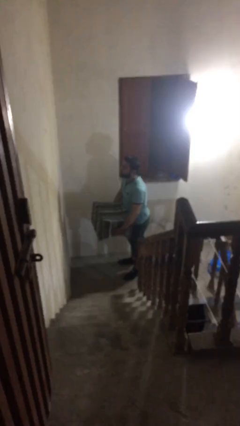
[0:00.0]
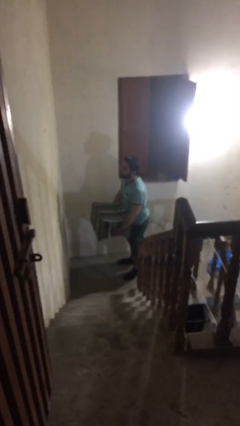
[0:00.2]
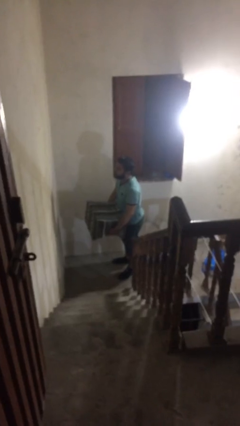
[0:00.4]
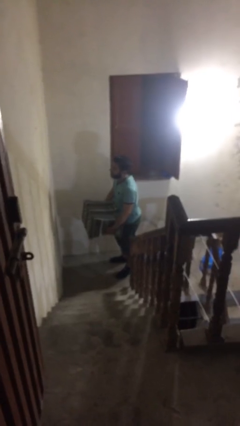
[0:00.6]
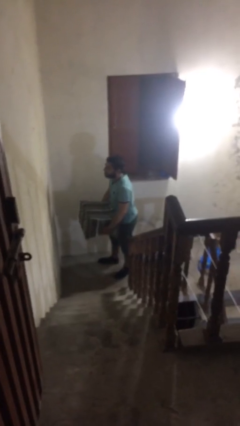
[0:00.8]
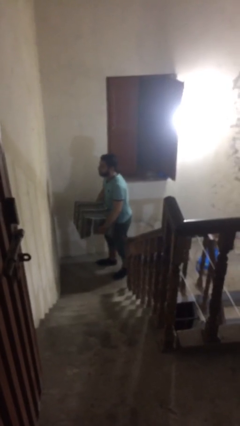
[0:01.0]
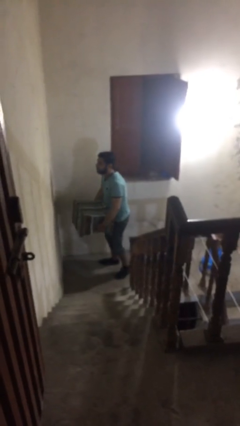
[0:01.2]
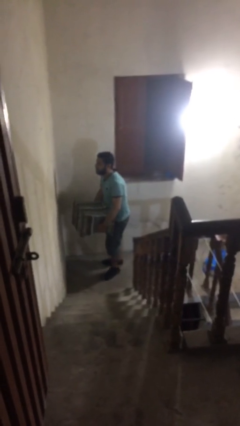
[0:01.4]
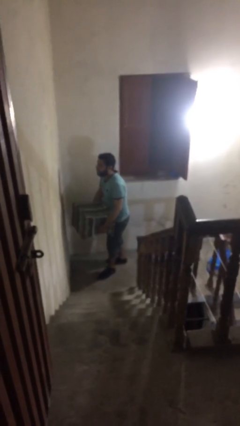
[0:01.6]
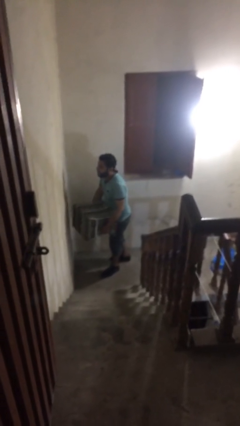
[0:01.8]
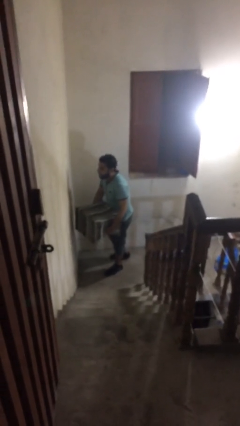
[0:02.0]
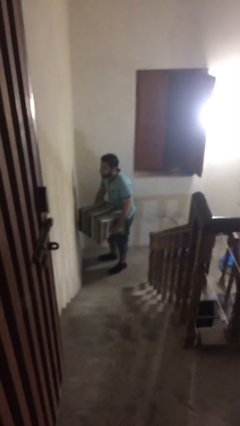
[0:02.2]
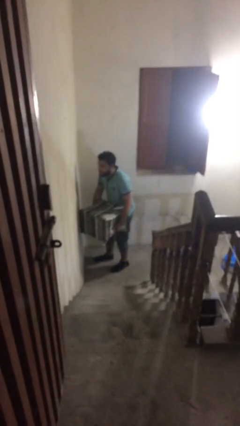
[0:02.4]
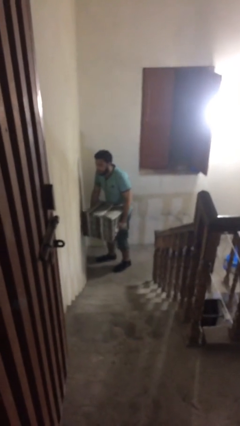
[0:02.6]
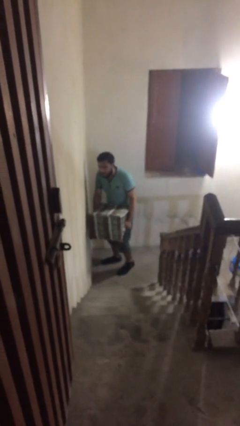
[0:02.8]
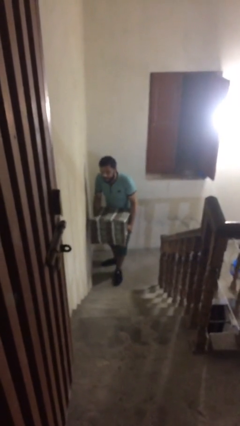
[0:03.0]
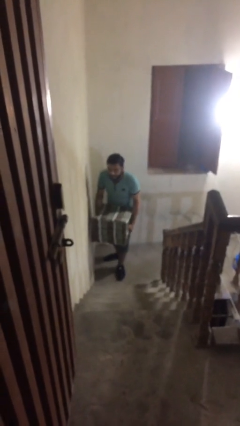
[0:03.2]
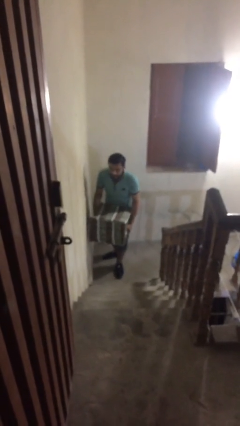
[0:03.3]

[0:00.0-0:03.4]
person carries heavy object

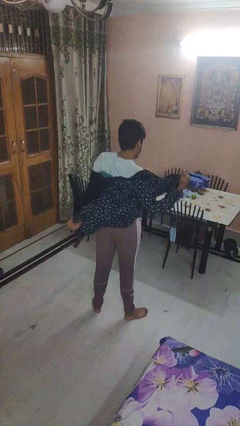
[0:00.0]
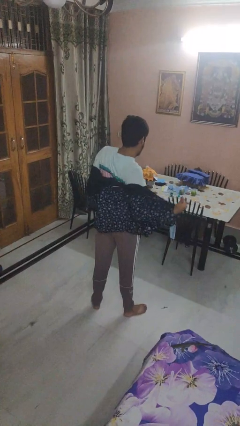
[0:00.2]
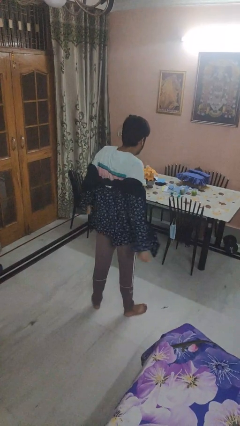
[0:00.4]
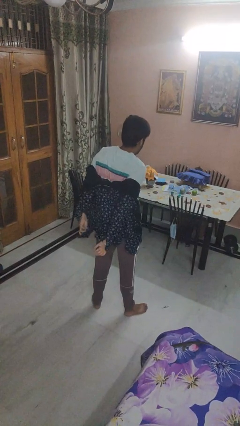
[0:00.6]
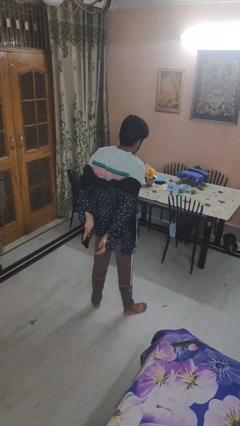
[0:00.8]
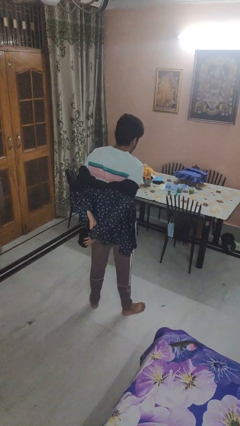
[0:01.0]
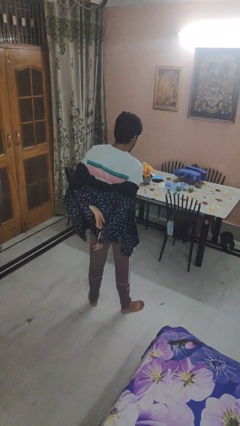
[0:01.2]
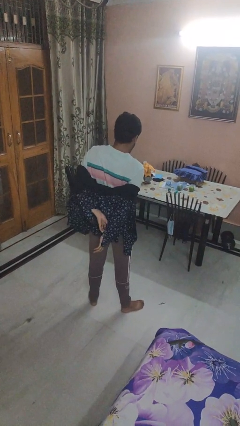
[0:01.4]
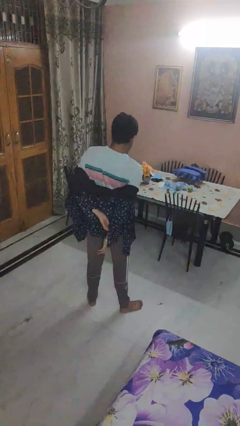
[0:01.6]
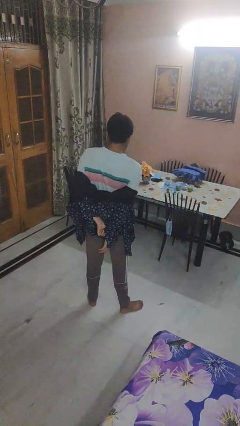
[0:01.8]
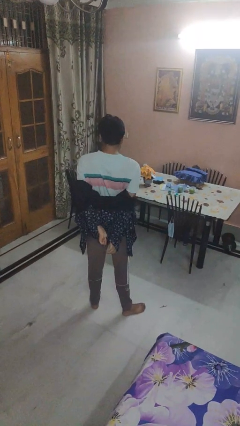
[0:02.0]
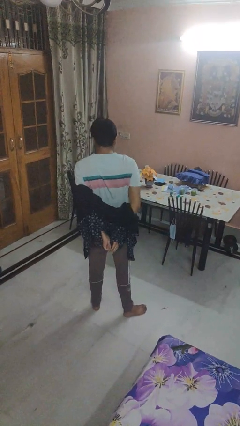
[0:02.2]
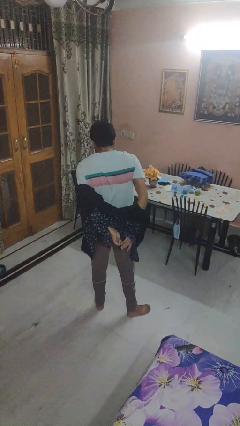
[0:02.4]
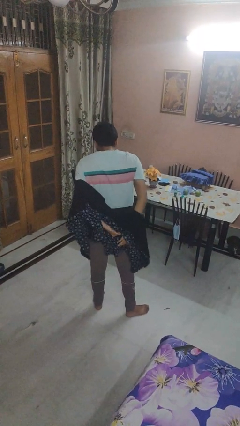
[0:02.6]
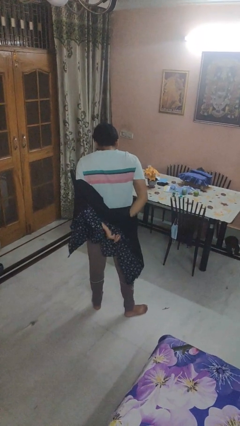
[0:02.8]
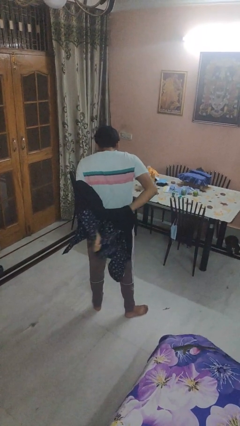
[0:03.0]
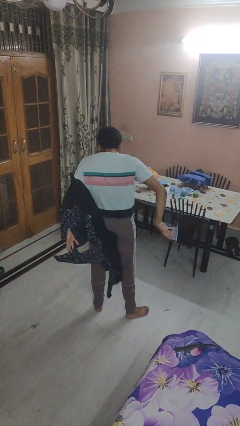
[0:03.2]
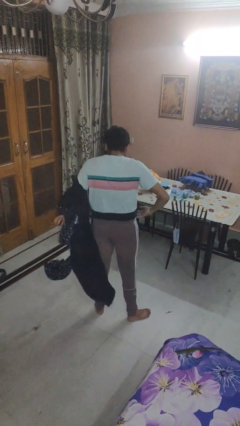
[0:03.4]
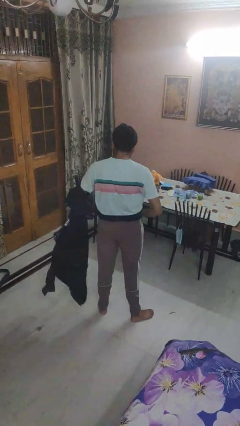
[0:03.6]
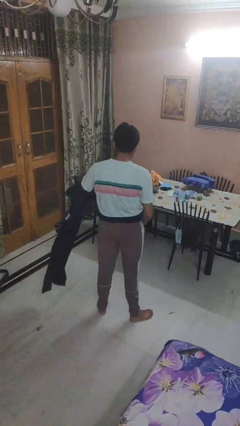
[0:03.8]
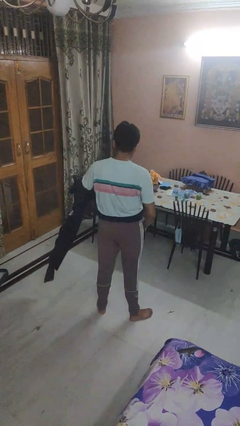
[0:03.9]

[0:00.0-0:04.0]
person takes off shirt

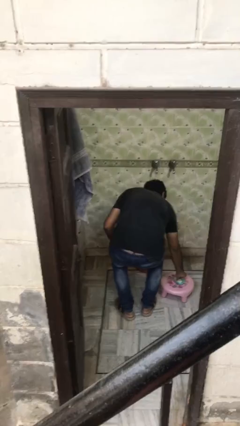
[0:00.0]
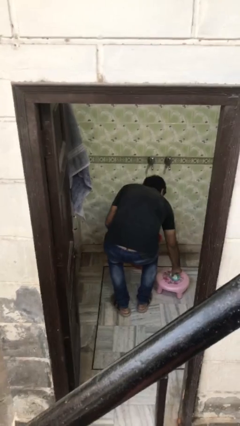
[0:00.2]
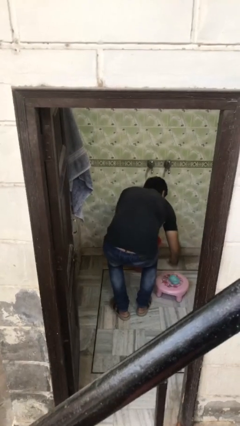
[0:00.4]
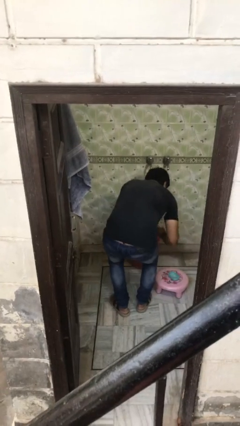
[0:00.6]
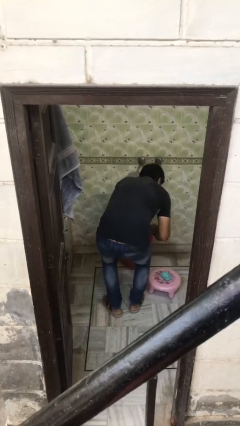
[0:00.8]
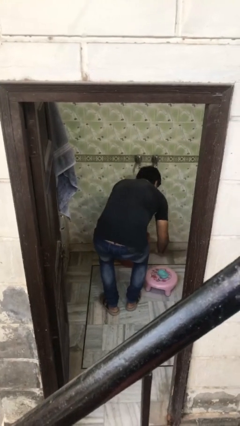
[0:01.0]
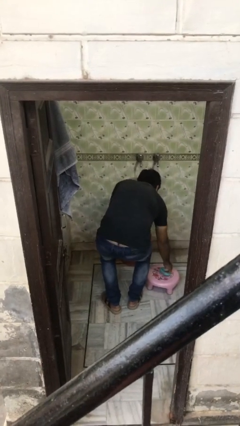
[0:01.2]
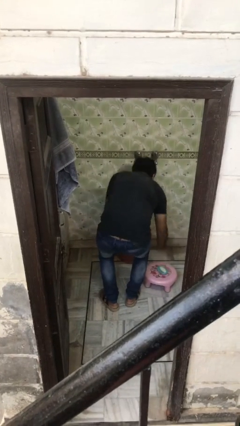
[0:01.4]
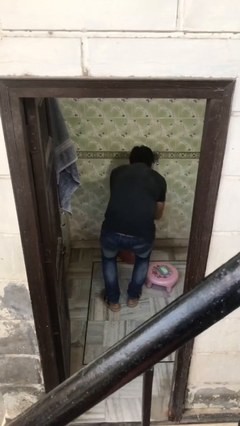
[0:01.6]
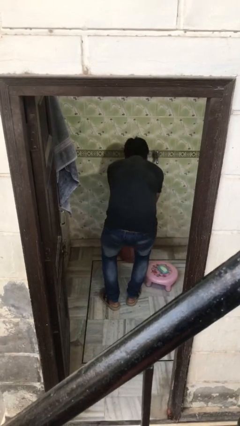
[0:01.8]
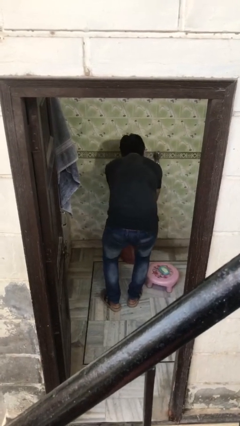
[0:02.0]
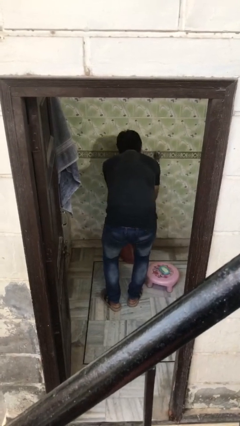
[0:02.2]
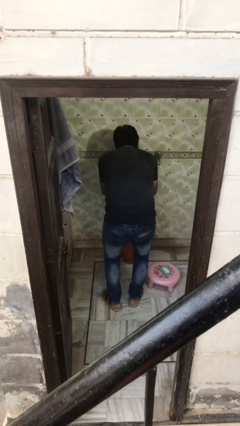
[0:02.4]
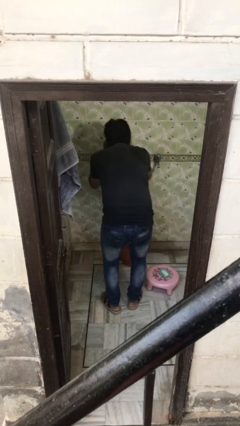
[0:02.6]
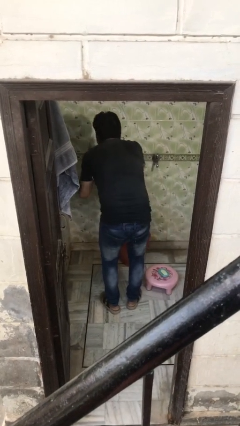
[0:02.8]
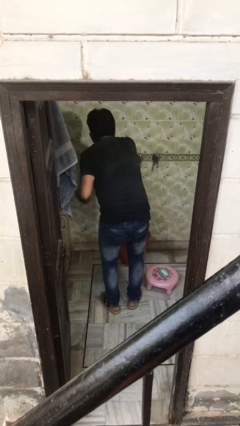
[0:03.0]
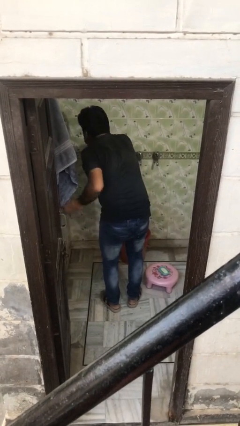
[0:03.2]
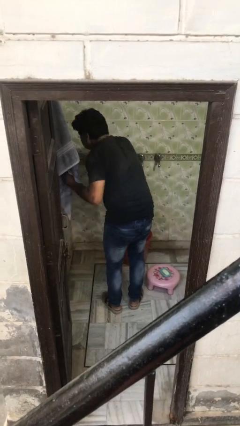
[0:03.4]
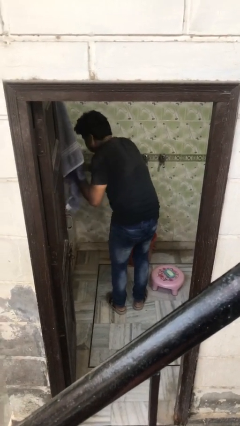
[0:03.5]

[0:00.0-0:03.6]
person washes face

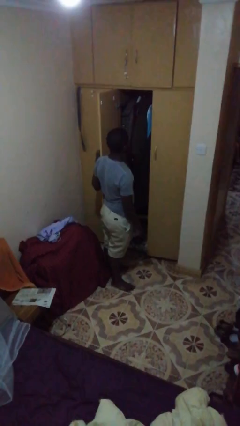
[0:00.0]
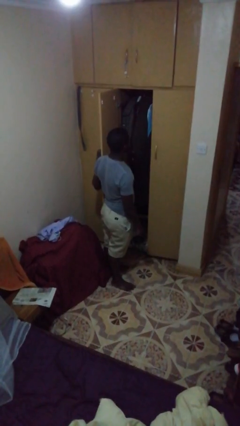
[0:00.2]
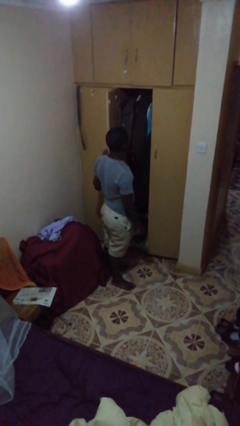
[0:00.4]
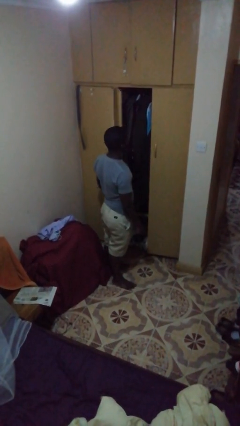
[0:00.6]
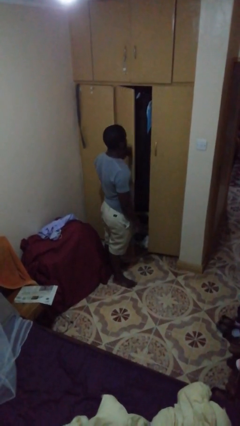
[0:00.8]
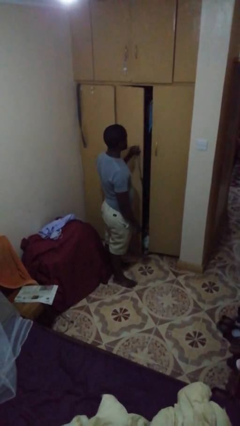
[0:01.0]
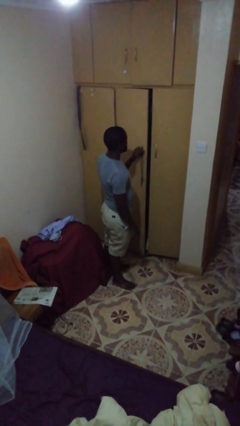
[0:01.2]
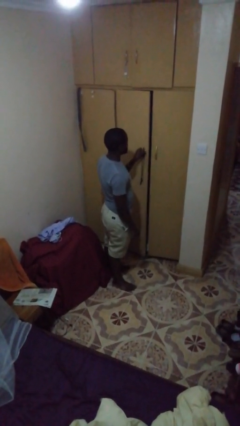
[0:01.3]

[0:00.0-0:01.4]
person closes closet door

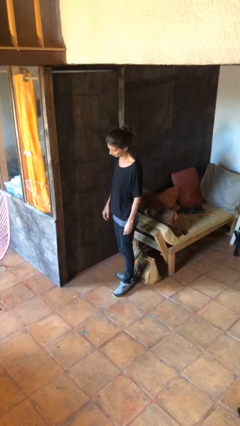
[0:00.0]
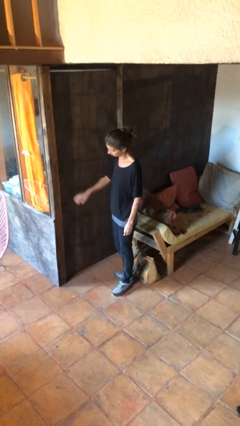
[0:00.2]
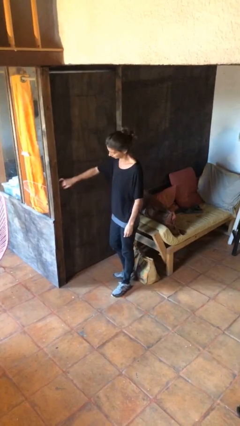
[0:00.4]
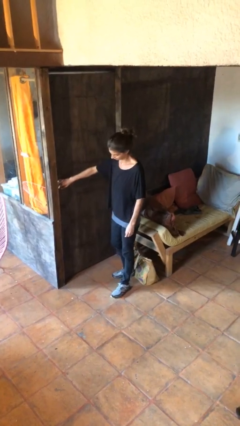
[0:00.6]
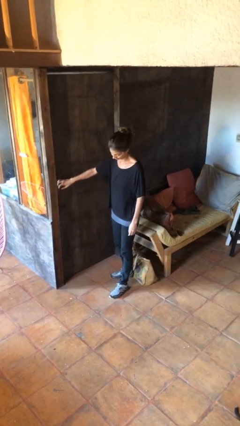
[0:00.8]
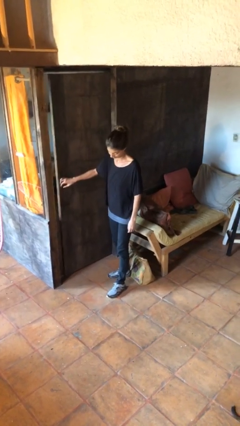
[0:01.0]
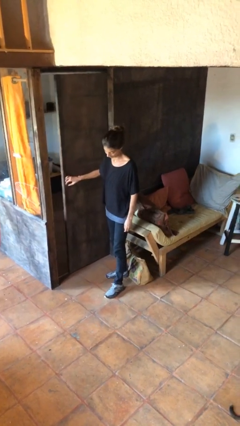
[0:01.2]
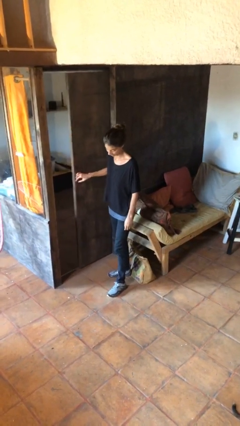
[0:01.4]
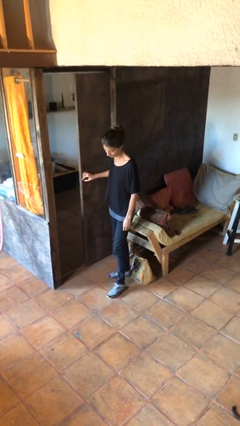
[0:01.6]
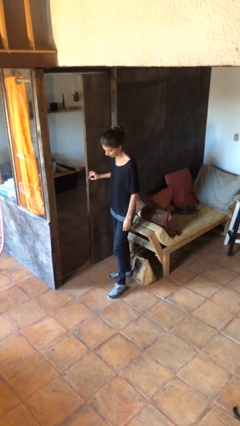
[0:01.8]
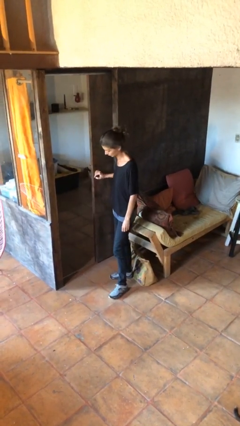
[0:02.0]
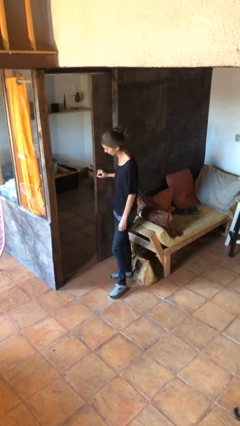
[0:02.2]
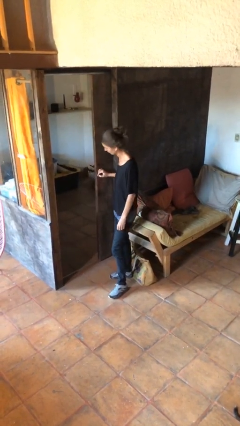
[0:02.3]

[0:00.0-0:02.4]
person opens sliding door

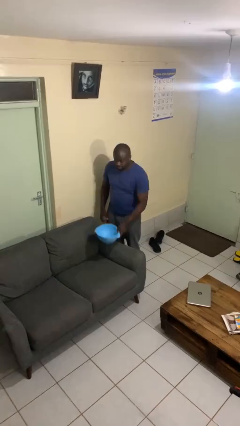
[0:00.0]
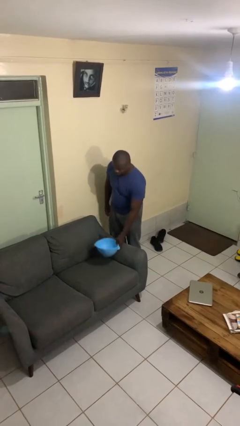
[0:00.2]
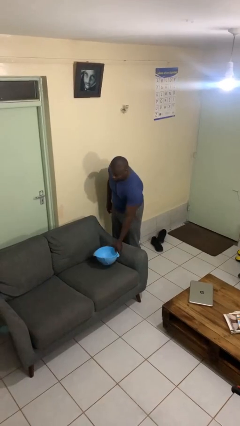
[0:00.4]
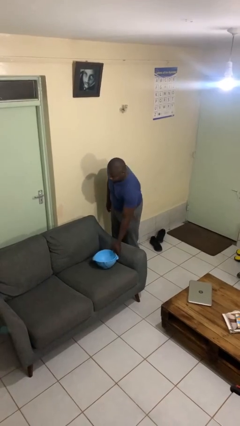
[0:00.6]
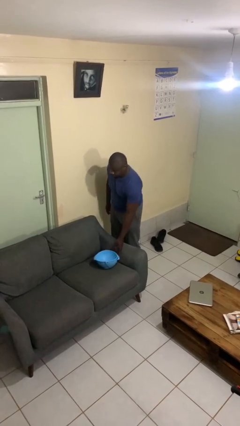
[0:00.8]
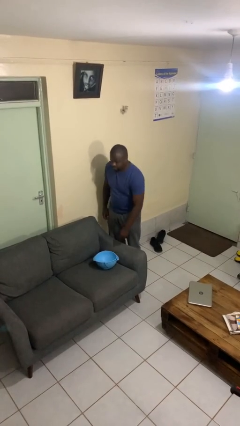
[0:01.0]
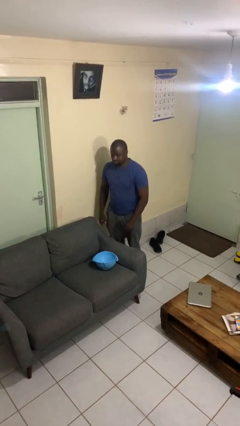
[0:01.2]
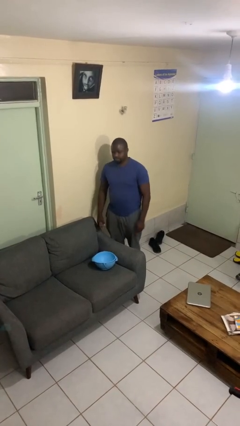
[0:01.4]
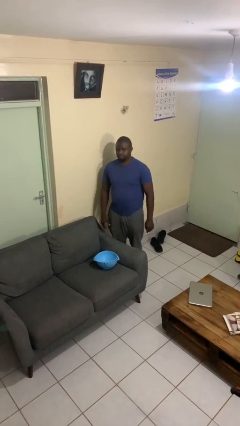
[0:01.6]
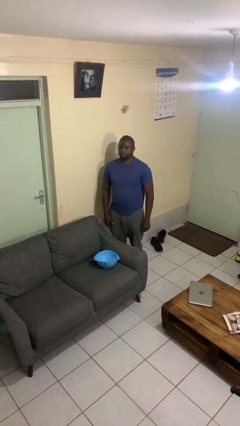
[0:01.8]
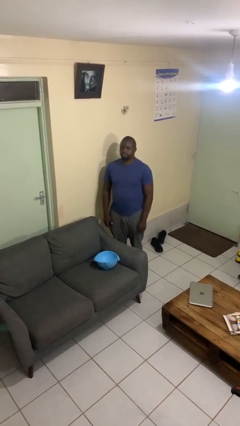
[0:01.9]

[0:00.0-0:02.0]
person puts down object on couch

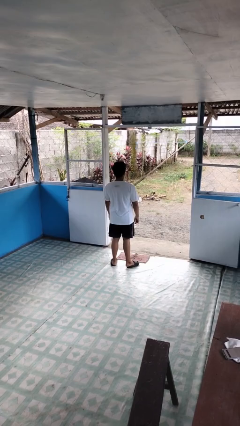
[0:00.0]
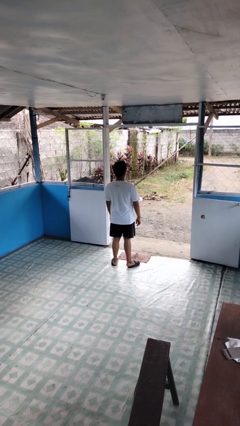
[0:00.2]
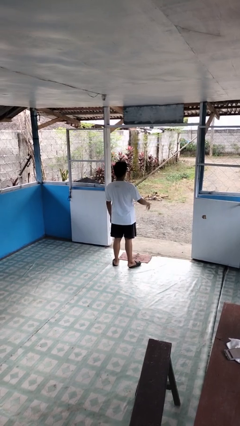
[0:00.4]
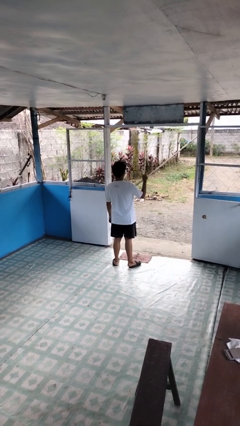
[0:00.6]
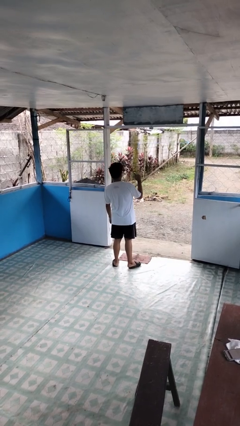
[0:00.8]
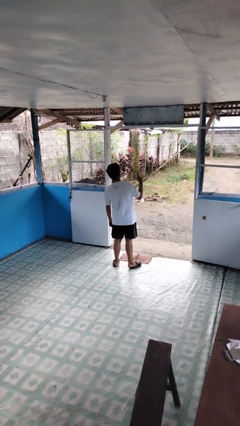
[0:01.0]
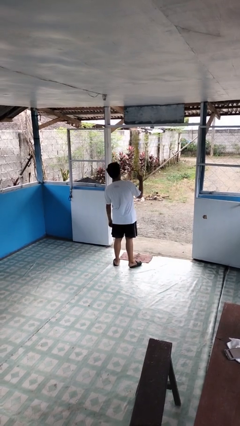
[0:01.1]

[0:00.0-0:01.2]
person gestures number one
